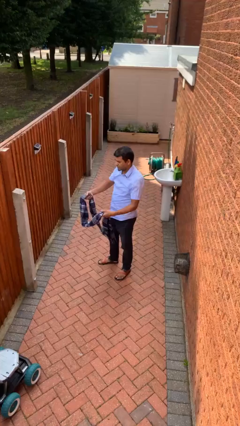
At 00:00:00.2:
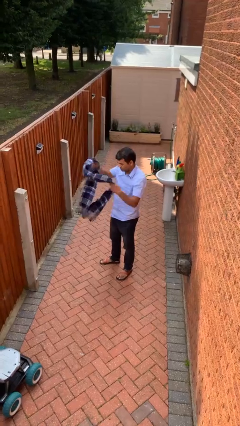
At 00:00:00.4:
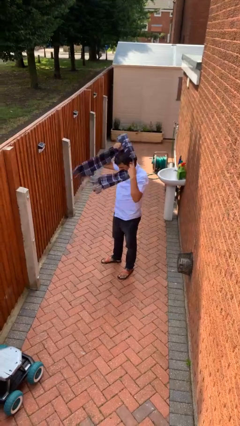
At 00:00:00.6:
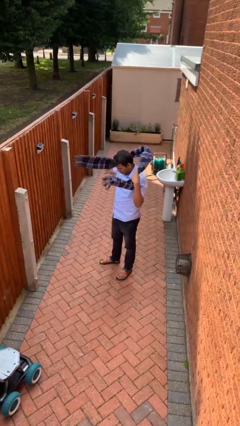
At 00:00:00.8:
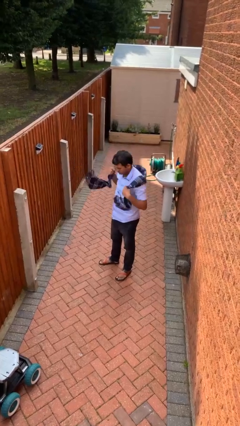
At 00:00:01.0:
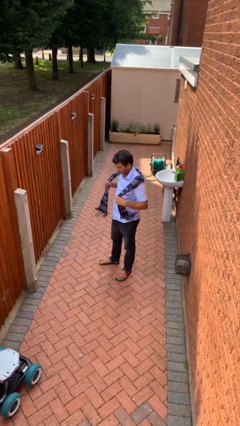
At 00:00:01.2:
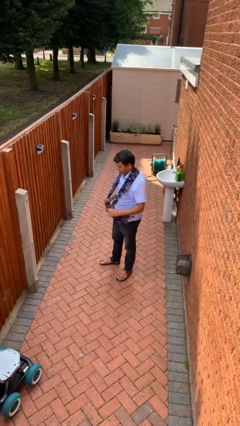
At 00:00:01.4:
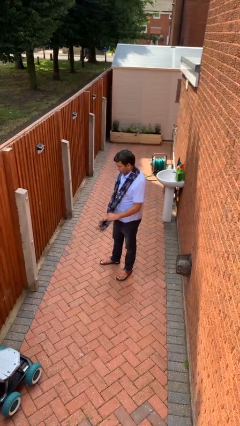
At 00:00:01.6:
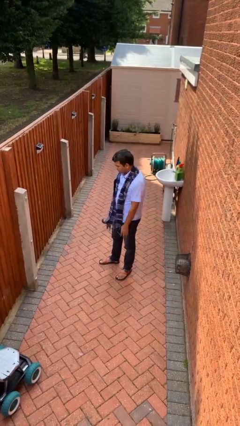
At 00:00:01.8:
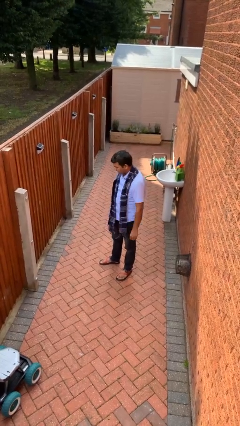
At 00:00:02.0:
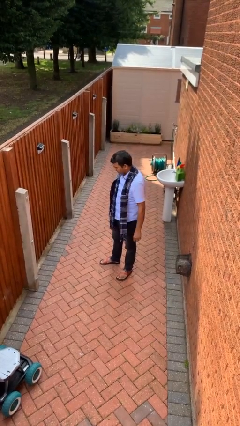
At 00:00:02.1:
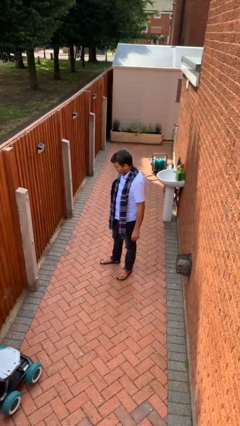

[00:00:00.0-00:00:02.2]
person puts on scarf

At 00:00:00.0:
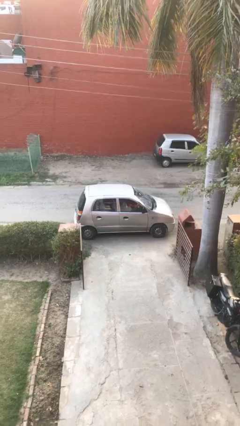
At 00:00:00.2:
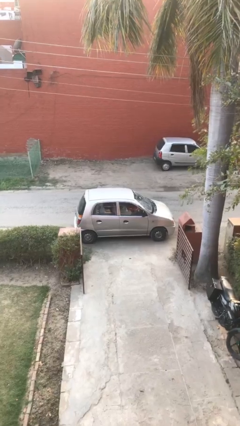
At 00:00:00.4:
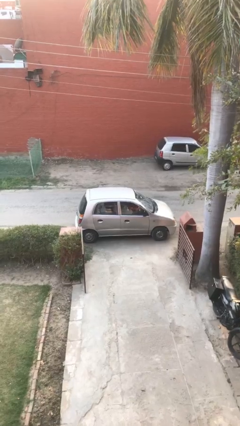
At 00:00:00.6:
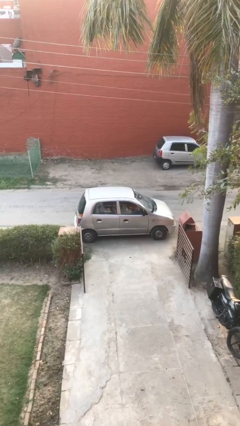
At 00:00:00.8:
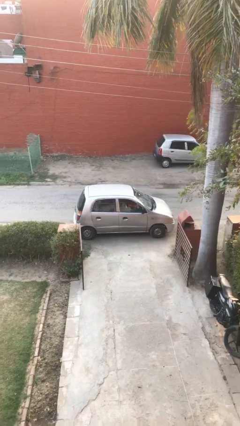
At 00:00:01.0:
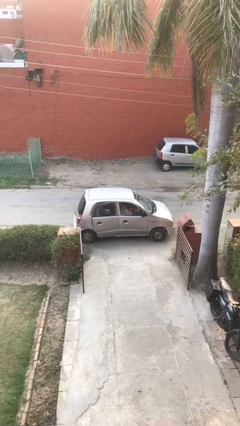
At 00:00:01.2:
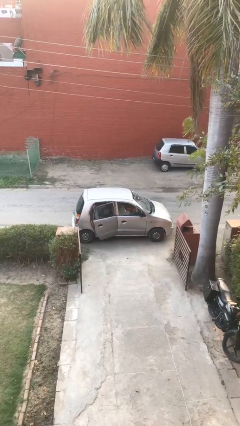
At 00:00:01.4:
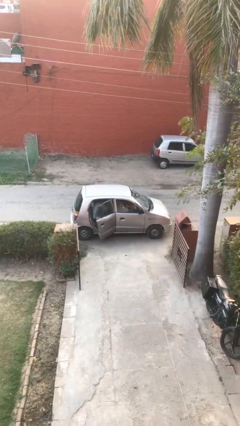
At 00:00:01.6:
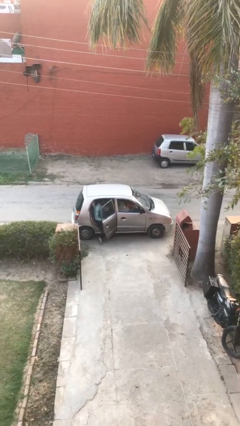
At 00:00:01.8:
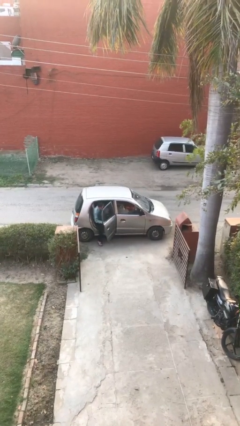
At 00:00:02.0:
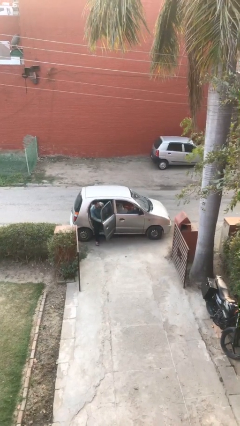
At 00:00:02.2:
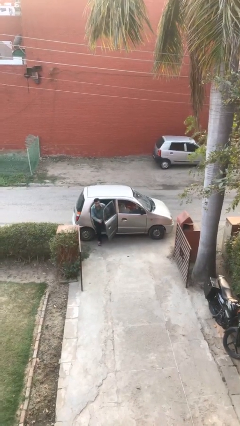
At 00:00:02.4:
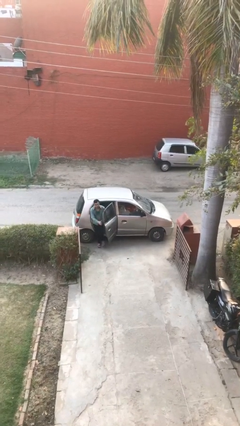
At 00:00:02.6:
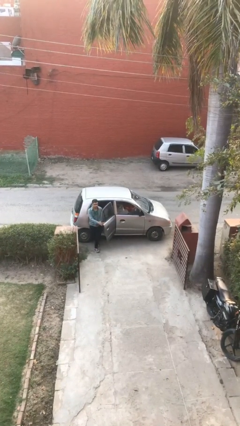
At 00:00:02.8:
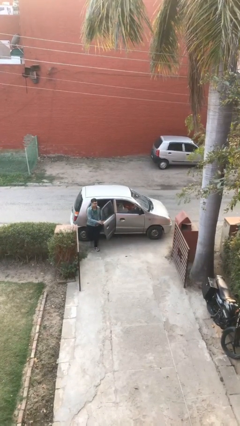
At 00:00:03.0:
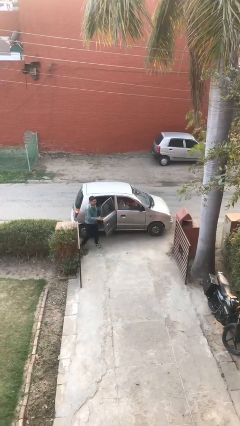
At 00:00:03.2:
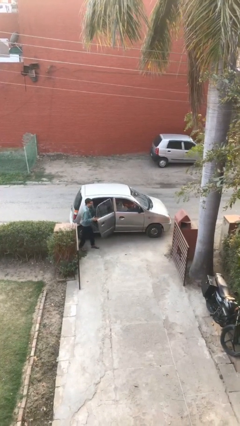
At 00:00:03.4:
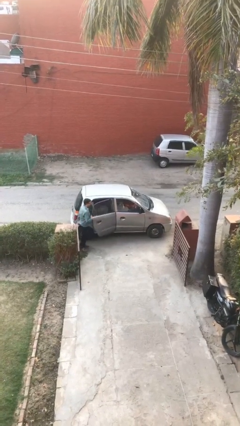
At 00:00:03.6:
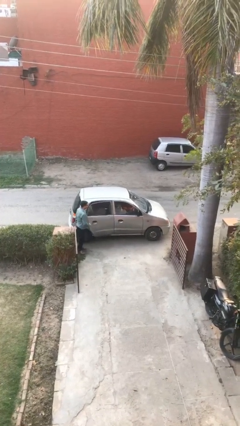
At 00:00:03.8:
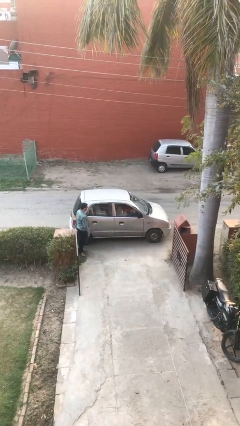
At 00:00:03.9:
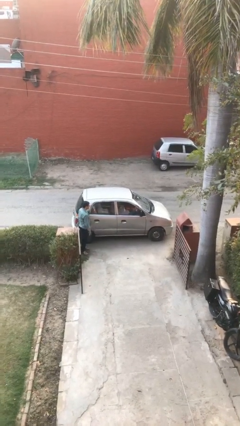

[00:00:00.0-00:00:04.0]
car drops off person

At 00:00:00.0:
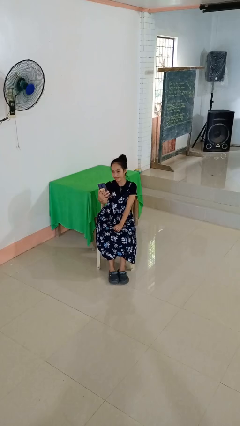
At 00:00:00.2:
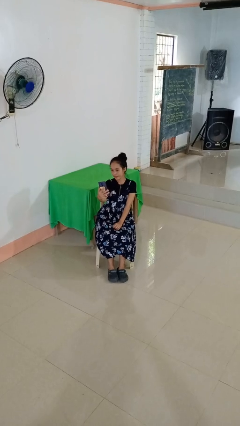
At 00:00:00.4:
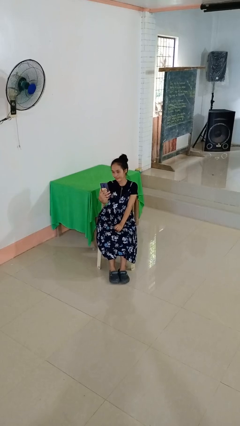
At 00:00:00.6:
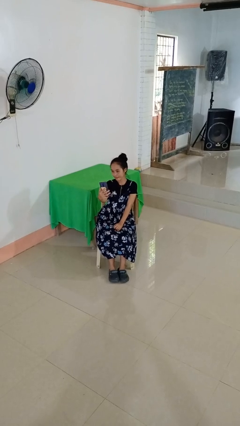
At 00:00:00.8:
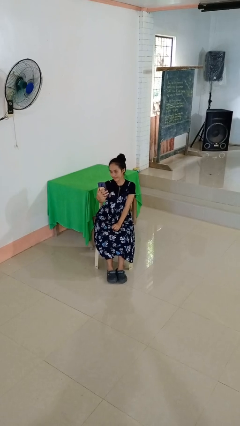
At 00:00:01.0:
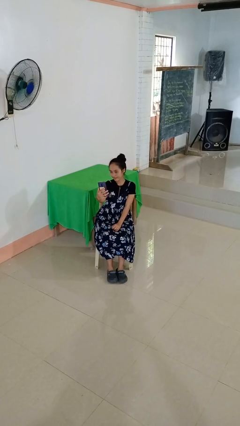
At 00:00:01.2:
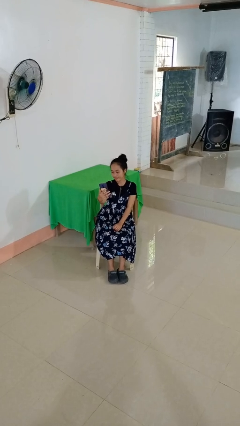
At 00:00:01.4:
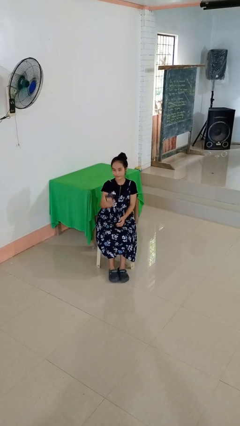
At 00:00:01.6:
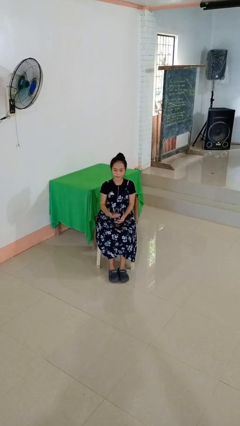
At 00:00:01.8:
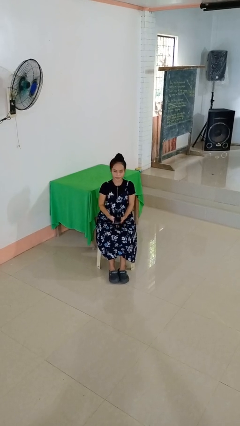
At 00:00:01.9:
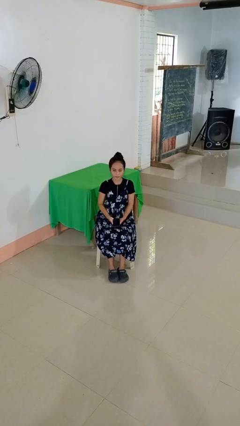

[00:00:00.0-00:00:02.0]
person takes selfie

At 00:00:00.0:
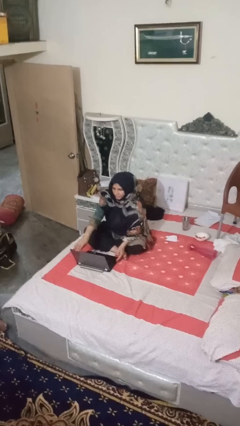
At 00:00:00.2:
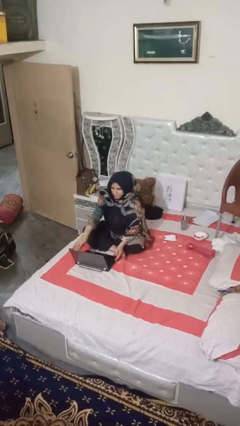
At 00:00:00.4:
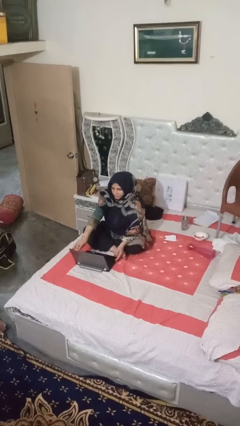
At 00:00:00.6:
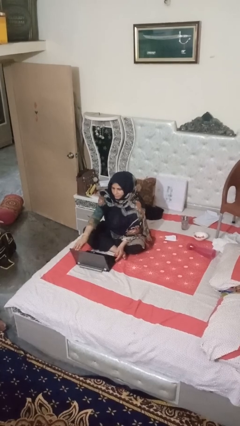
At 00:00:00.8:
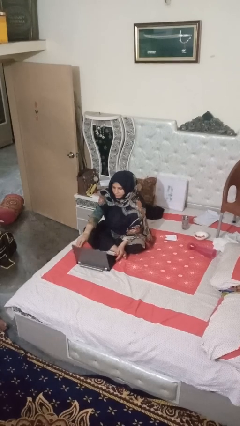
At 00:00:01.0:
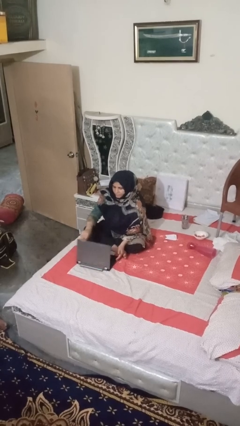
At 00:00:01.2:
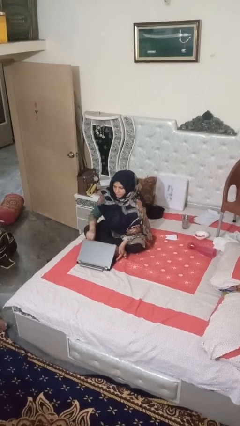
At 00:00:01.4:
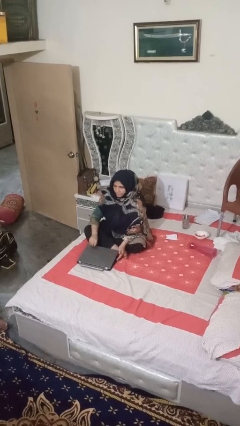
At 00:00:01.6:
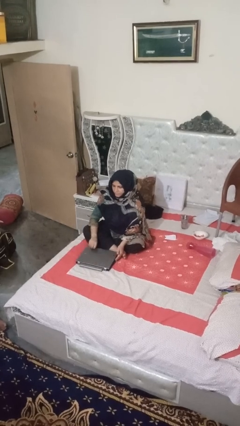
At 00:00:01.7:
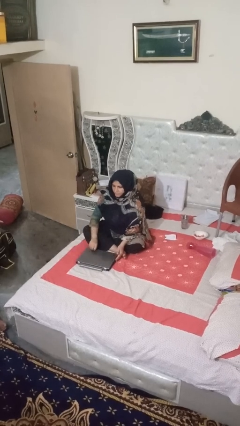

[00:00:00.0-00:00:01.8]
person closes laptop

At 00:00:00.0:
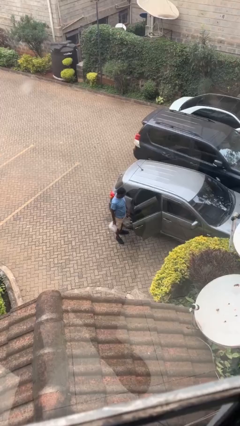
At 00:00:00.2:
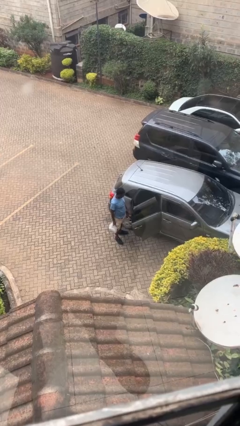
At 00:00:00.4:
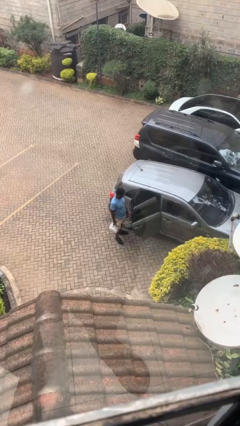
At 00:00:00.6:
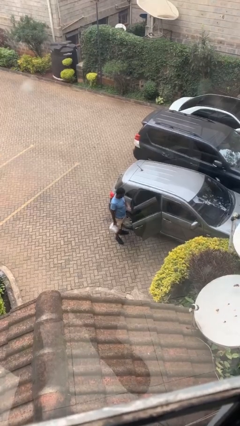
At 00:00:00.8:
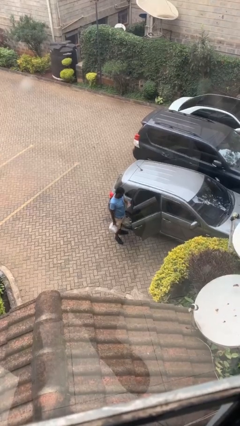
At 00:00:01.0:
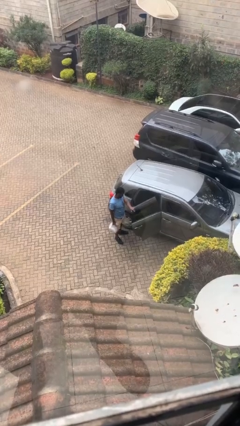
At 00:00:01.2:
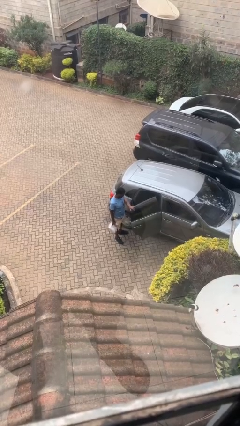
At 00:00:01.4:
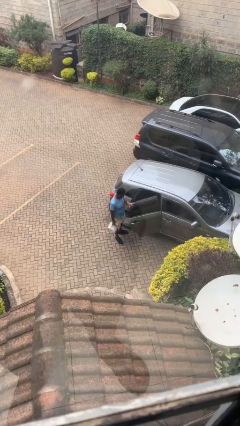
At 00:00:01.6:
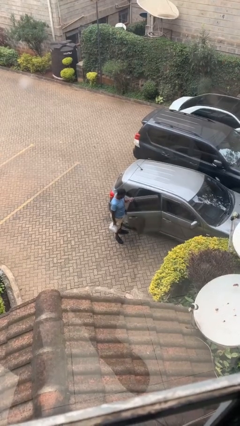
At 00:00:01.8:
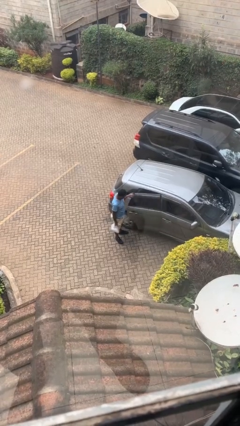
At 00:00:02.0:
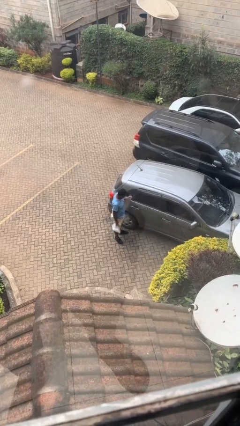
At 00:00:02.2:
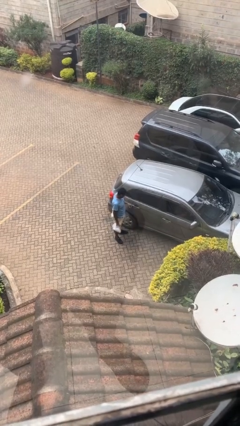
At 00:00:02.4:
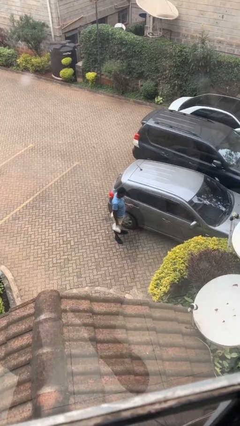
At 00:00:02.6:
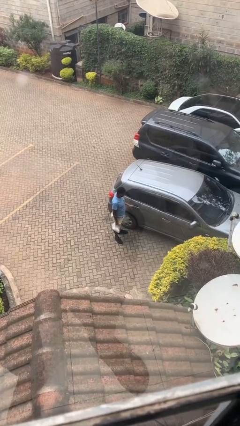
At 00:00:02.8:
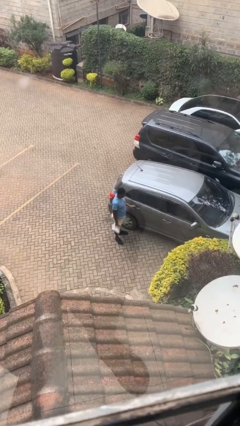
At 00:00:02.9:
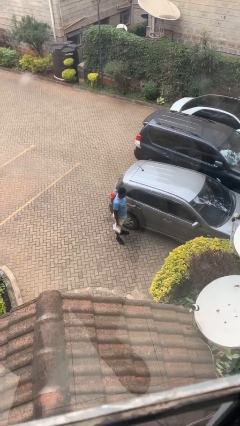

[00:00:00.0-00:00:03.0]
person closes car door

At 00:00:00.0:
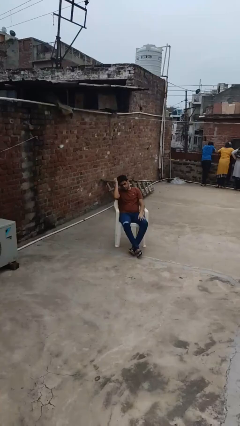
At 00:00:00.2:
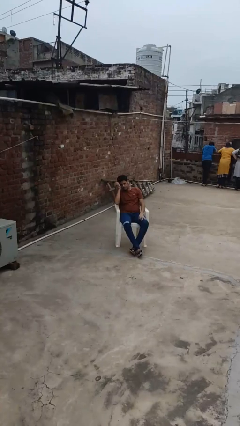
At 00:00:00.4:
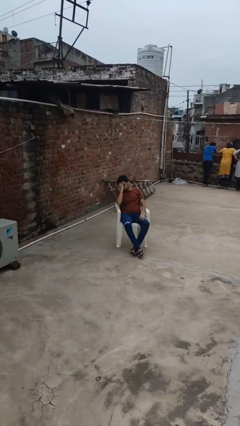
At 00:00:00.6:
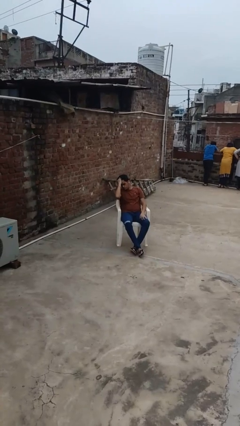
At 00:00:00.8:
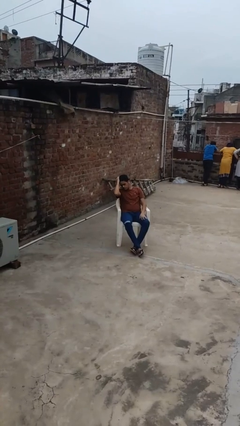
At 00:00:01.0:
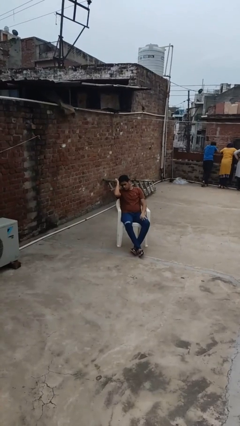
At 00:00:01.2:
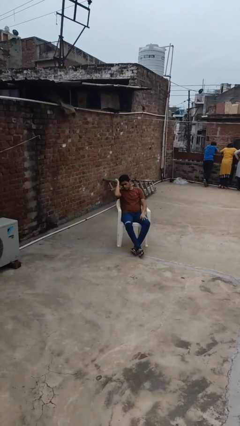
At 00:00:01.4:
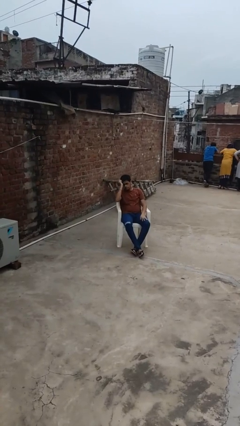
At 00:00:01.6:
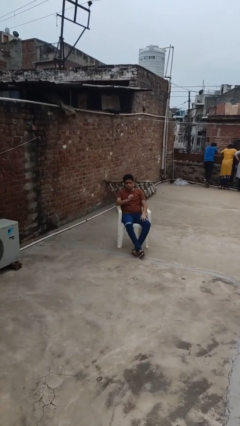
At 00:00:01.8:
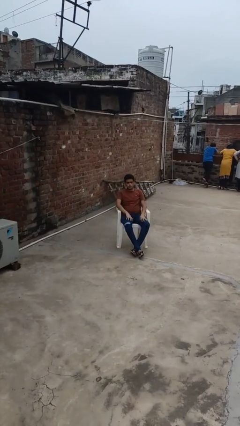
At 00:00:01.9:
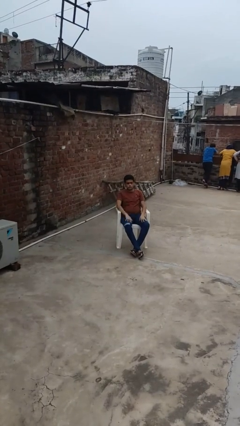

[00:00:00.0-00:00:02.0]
person strokes hair

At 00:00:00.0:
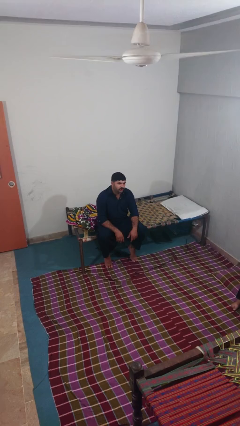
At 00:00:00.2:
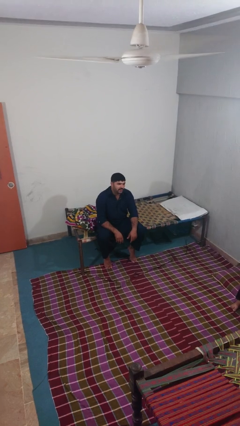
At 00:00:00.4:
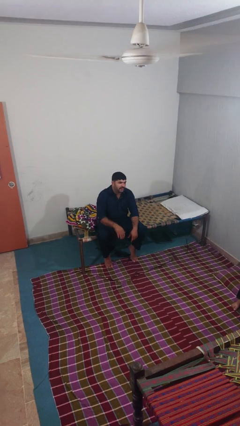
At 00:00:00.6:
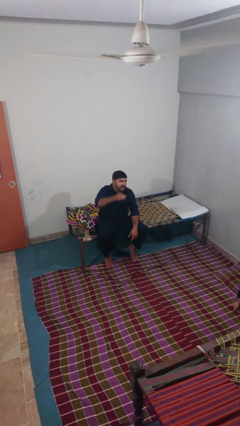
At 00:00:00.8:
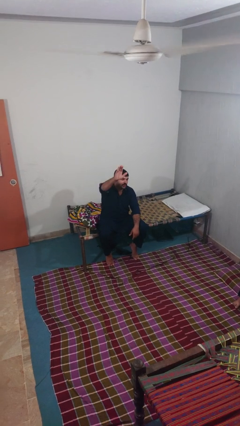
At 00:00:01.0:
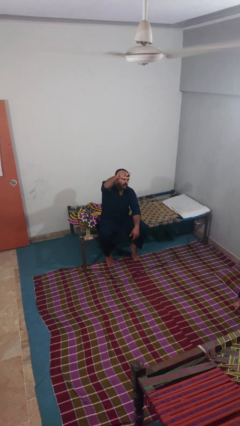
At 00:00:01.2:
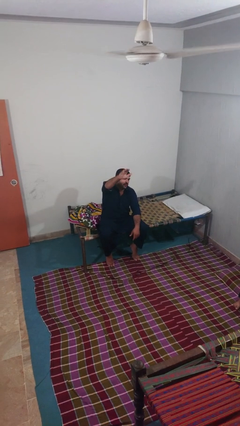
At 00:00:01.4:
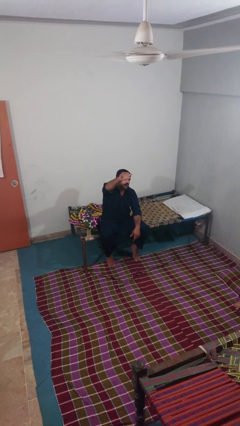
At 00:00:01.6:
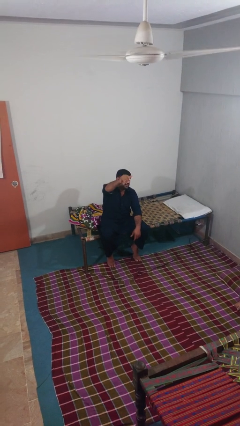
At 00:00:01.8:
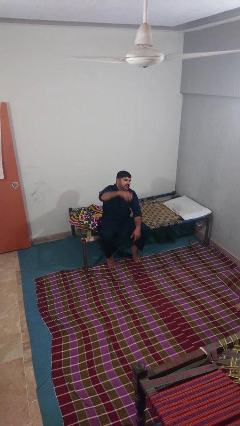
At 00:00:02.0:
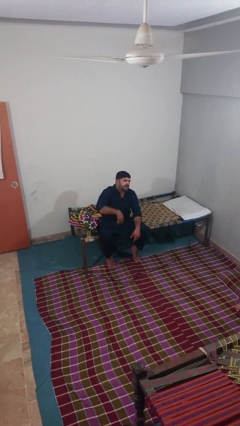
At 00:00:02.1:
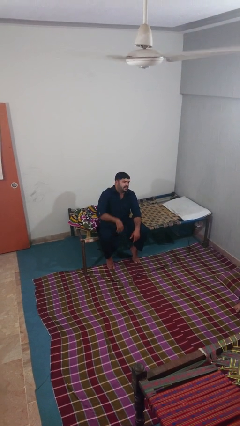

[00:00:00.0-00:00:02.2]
person gestures come here
